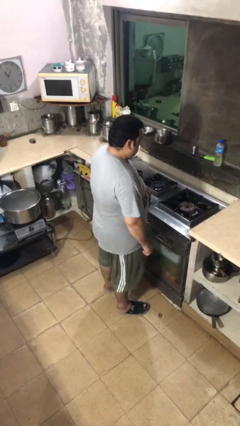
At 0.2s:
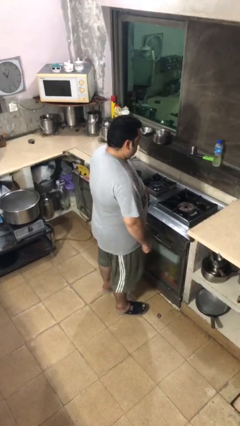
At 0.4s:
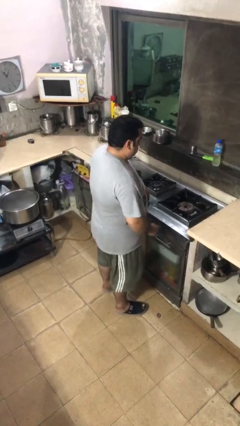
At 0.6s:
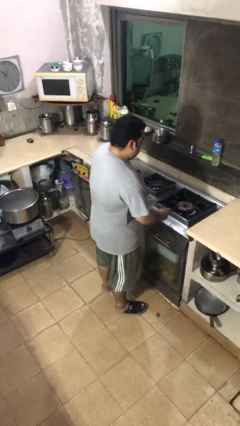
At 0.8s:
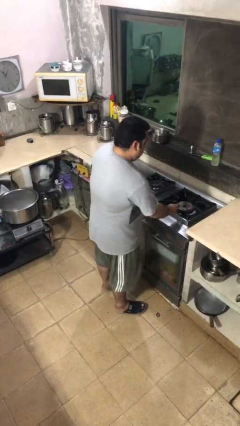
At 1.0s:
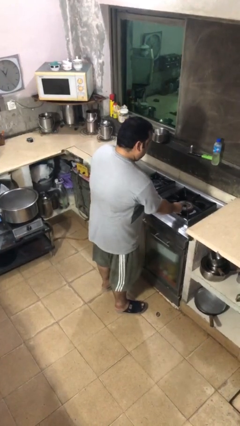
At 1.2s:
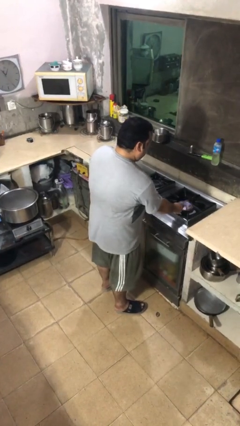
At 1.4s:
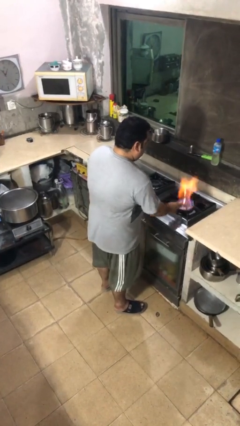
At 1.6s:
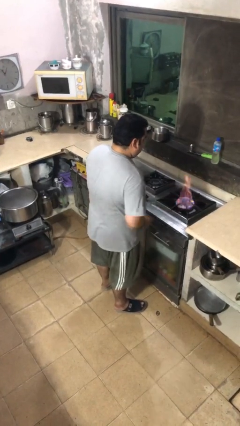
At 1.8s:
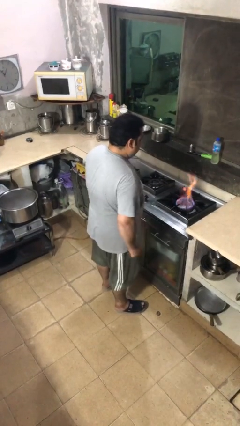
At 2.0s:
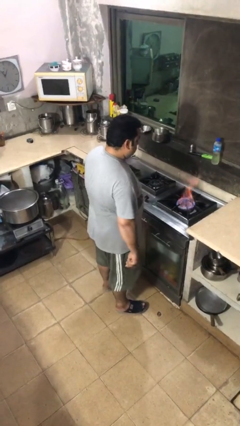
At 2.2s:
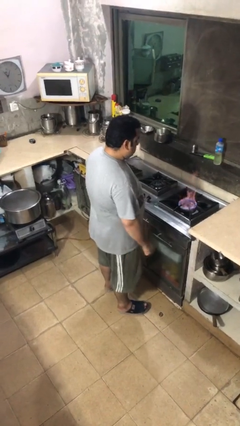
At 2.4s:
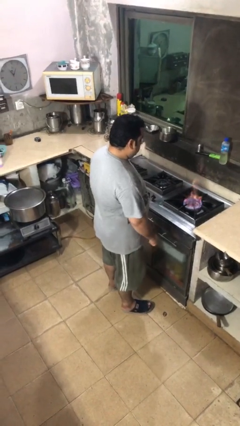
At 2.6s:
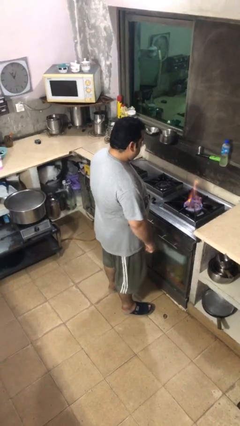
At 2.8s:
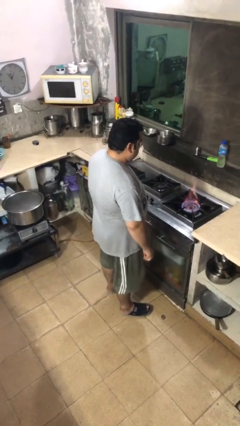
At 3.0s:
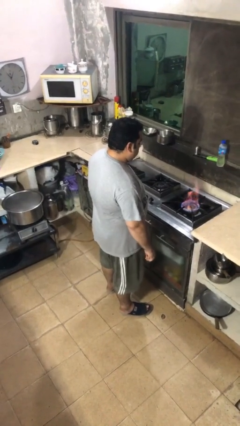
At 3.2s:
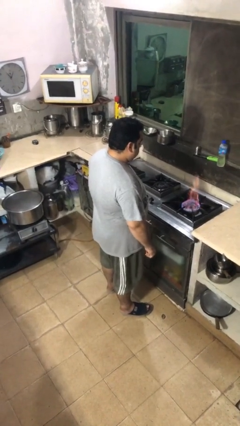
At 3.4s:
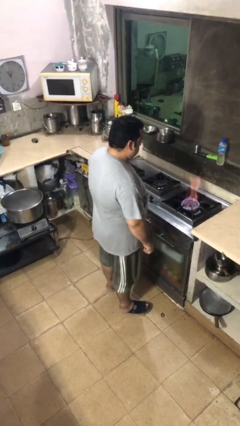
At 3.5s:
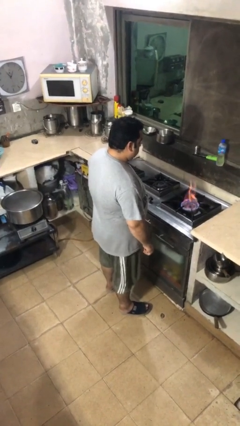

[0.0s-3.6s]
person turns on stovetop

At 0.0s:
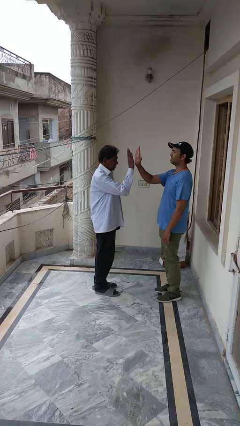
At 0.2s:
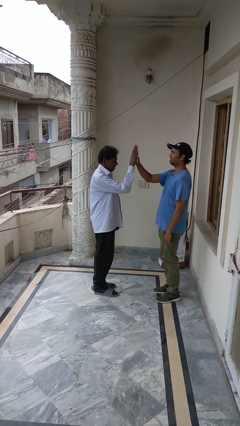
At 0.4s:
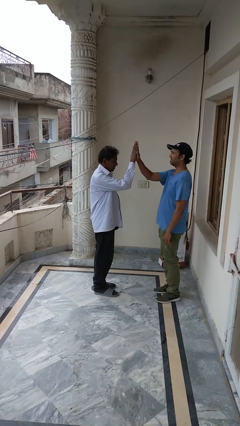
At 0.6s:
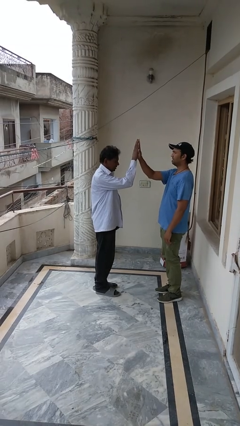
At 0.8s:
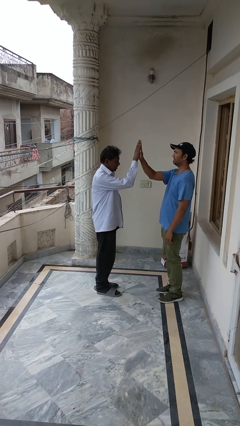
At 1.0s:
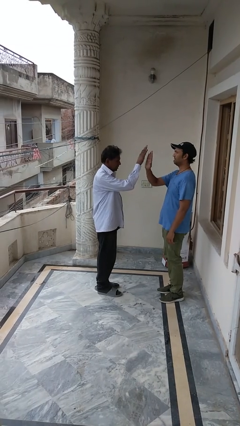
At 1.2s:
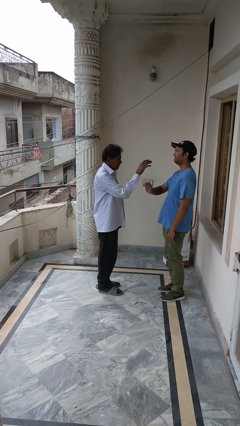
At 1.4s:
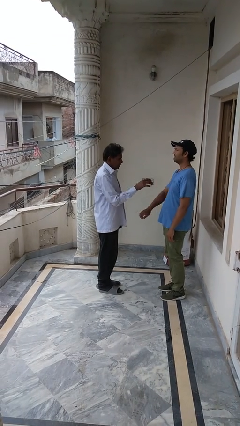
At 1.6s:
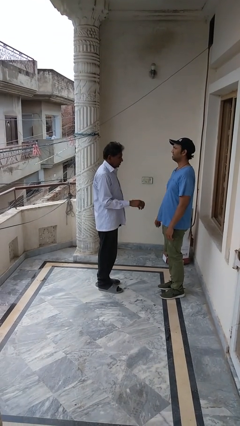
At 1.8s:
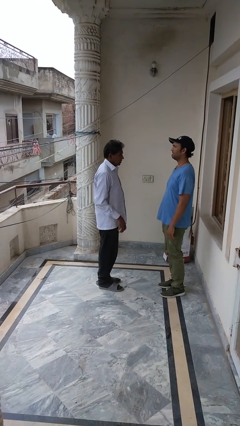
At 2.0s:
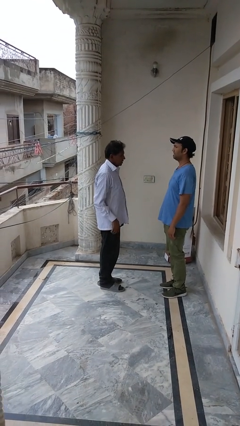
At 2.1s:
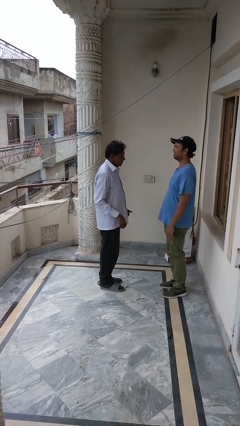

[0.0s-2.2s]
person highfives hand

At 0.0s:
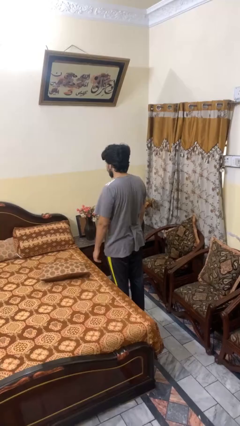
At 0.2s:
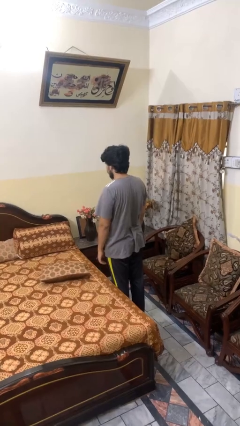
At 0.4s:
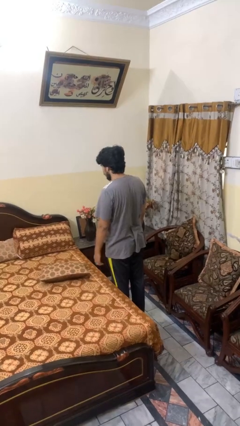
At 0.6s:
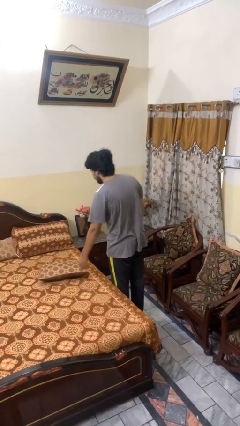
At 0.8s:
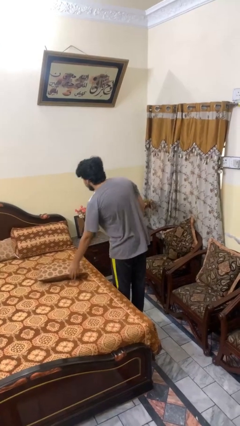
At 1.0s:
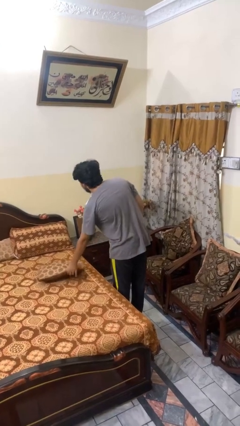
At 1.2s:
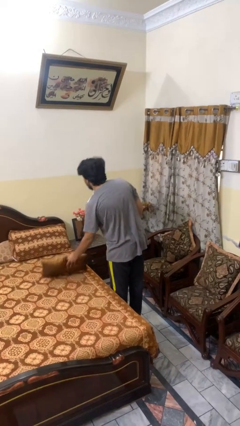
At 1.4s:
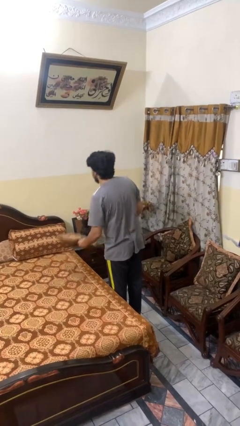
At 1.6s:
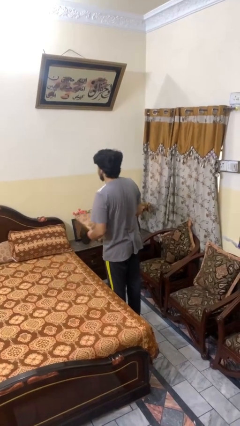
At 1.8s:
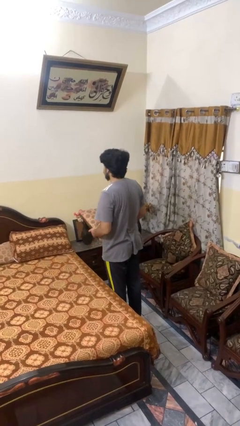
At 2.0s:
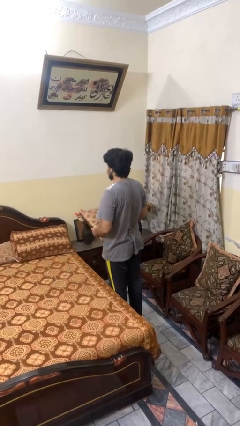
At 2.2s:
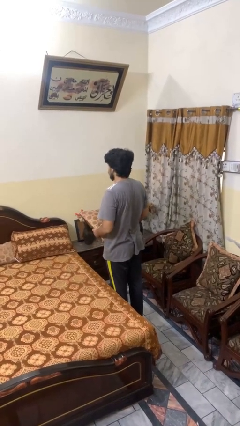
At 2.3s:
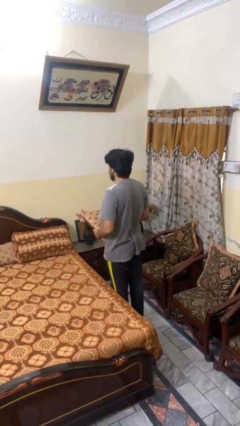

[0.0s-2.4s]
person picks up object from bed

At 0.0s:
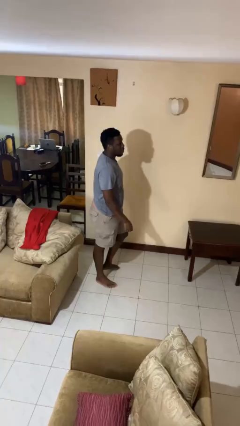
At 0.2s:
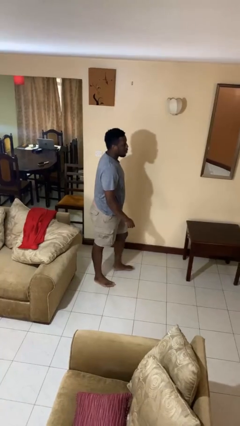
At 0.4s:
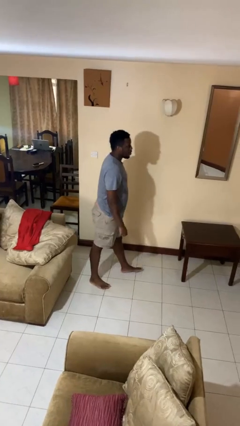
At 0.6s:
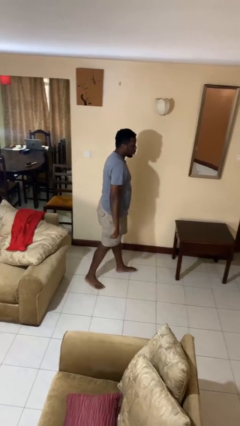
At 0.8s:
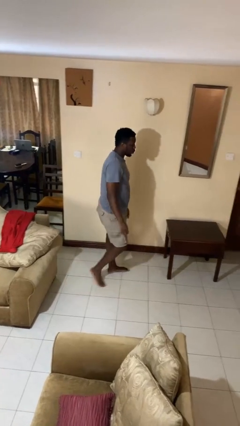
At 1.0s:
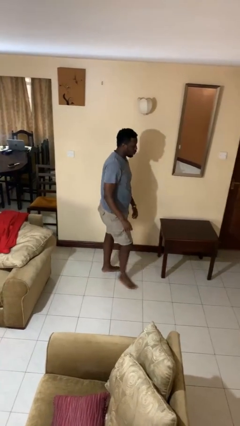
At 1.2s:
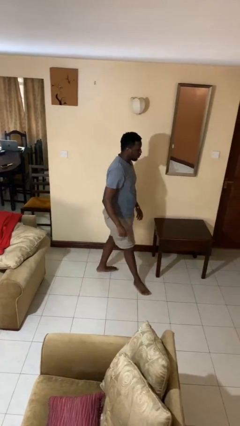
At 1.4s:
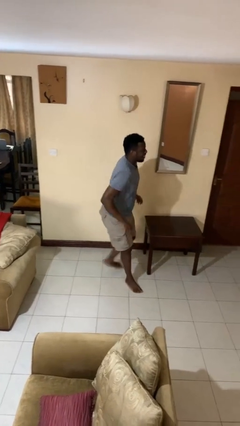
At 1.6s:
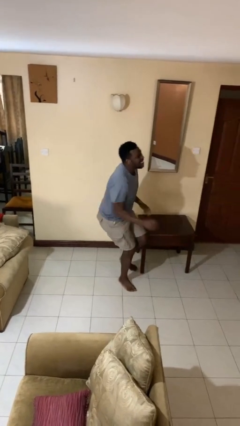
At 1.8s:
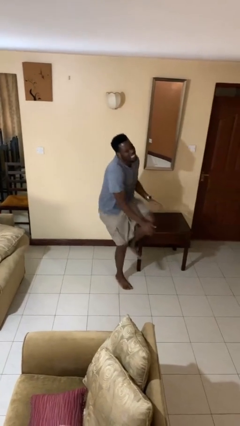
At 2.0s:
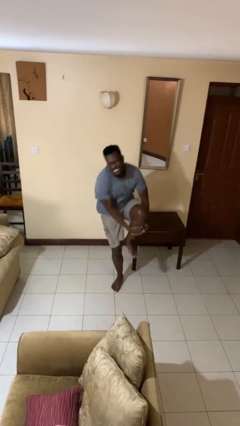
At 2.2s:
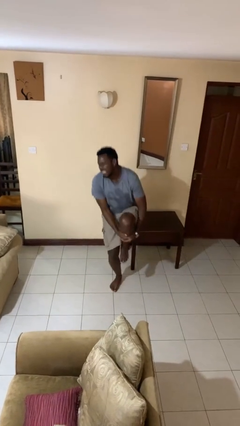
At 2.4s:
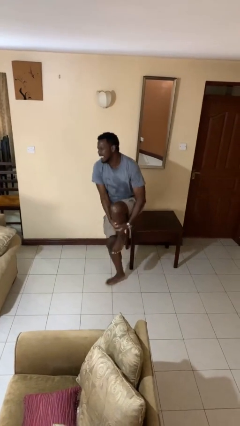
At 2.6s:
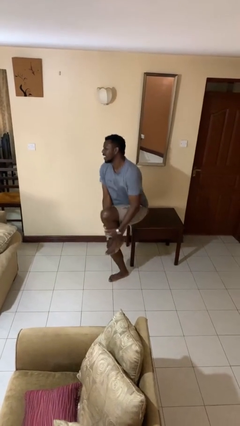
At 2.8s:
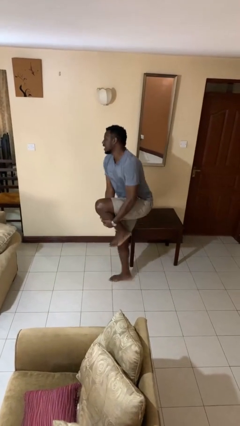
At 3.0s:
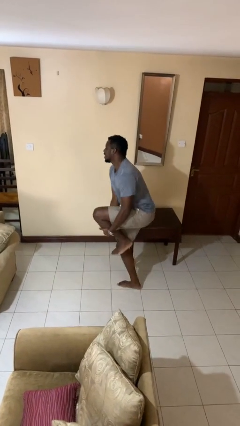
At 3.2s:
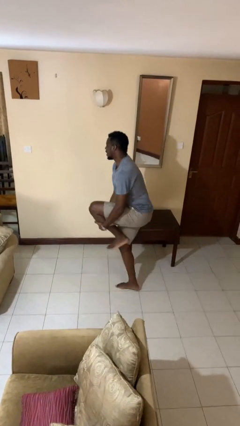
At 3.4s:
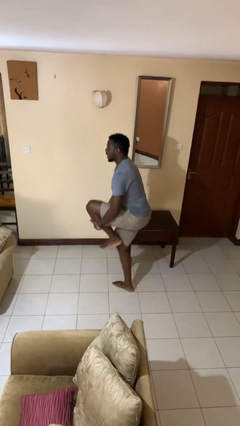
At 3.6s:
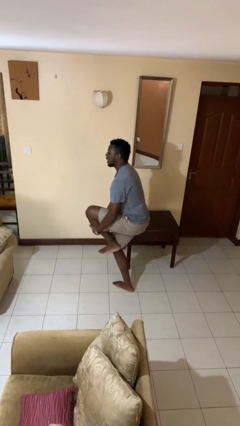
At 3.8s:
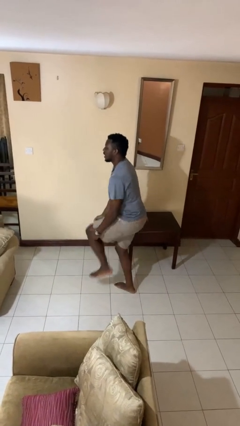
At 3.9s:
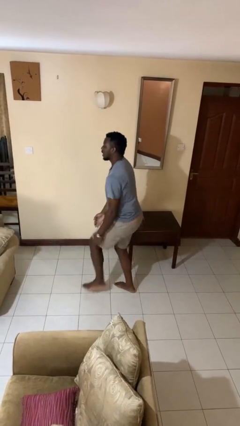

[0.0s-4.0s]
person stubs toe

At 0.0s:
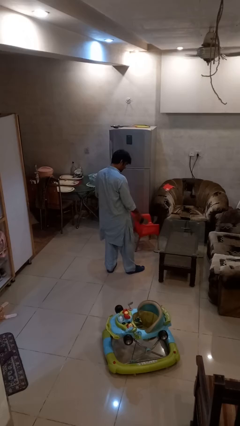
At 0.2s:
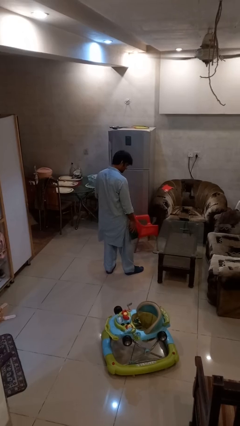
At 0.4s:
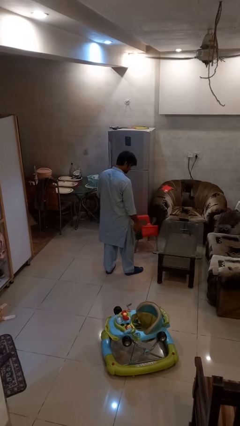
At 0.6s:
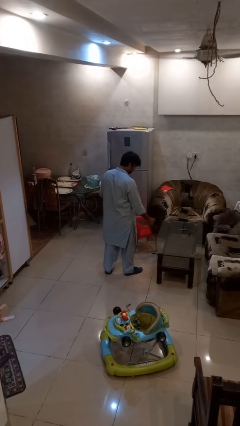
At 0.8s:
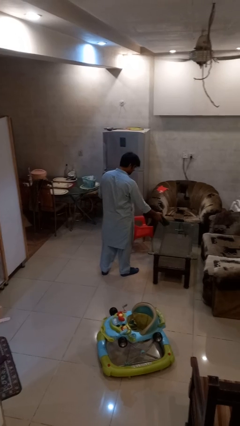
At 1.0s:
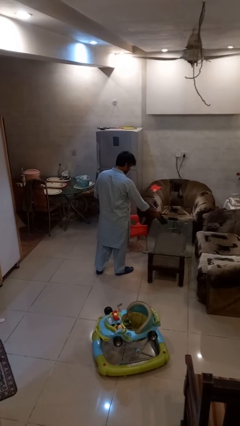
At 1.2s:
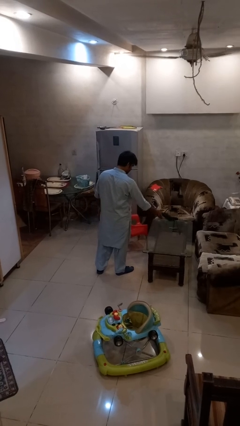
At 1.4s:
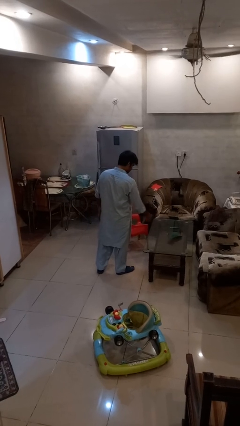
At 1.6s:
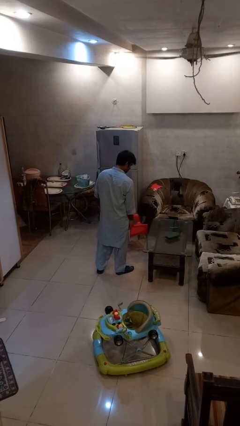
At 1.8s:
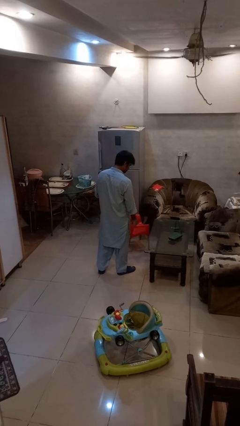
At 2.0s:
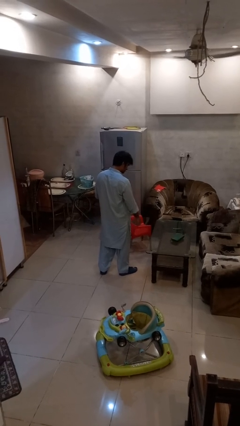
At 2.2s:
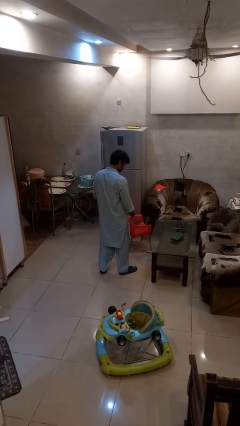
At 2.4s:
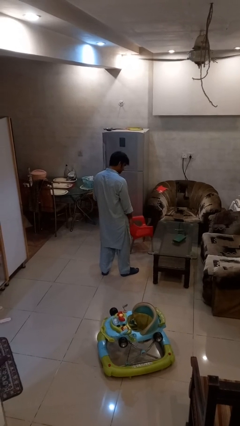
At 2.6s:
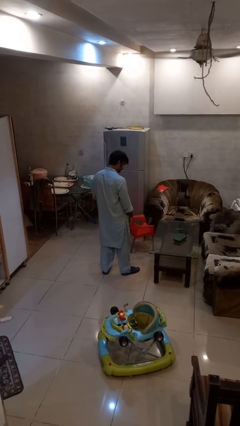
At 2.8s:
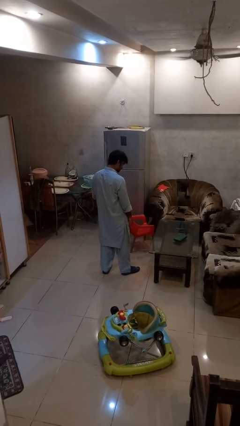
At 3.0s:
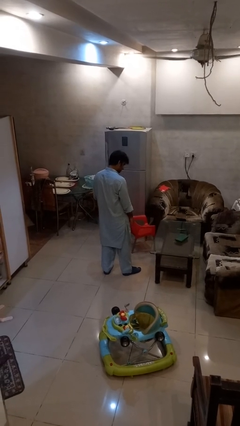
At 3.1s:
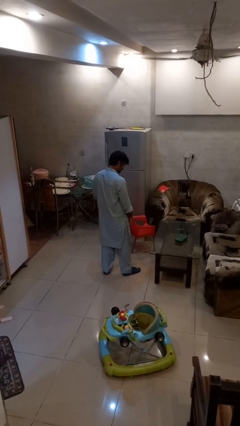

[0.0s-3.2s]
person throws object on table

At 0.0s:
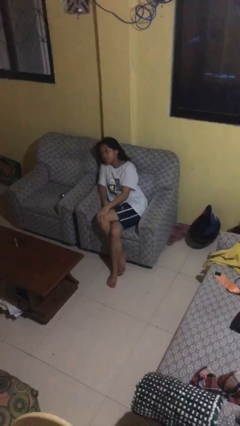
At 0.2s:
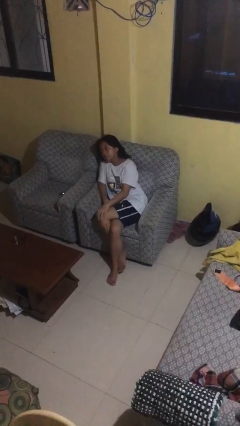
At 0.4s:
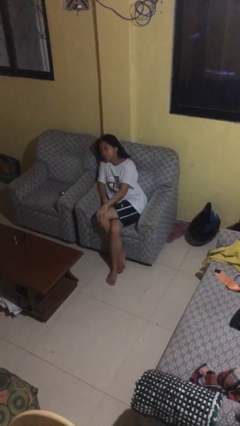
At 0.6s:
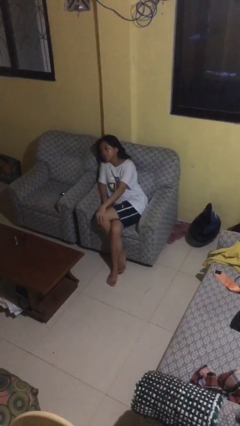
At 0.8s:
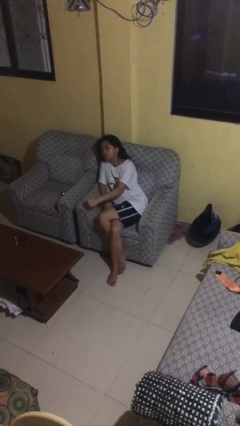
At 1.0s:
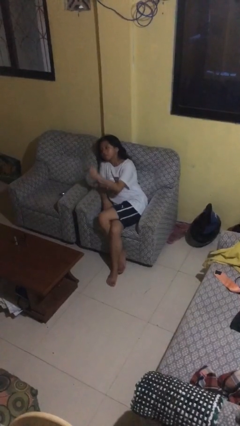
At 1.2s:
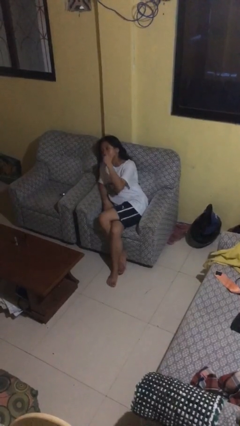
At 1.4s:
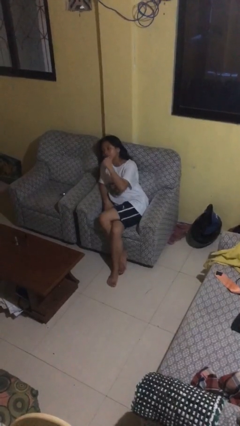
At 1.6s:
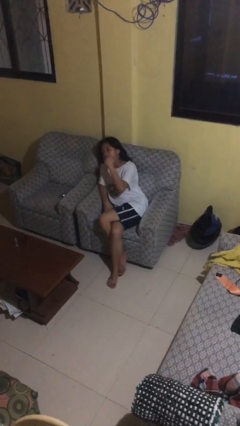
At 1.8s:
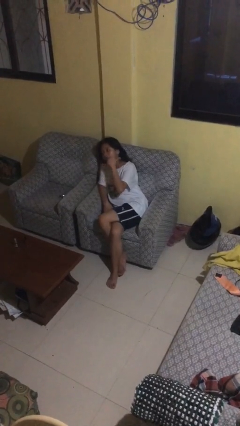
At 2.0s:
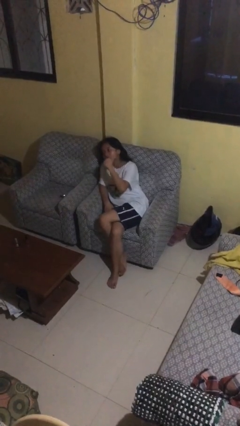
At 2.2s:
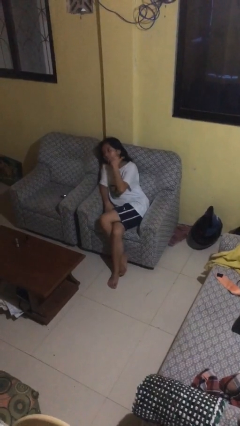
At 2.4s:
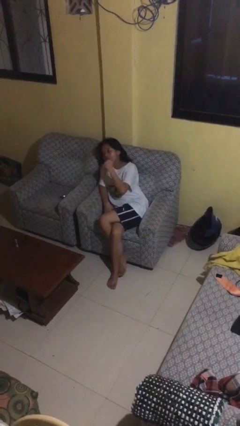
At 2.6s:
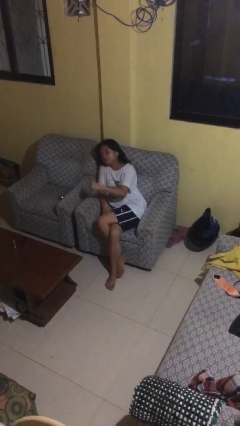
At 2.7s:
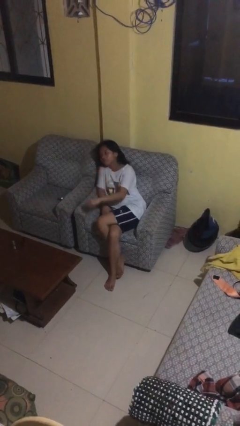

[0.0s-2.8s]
person gestures behind me
